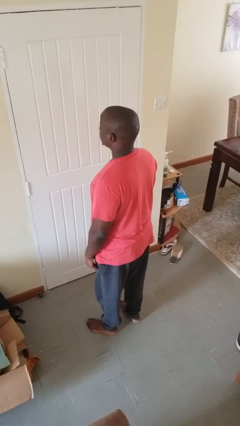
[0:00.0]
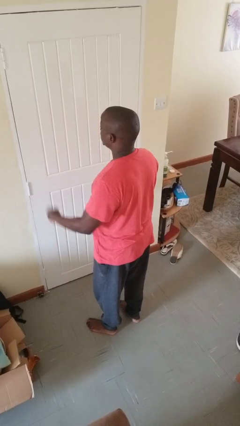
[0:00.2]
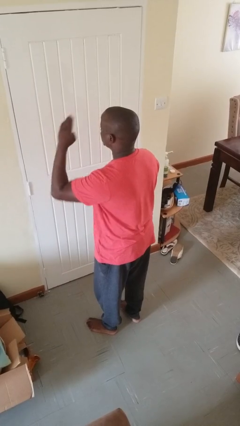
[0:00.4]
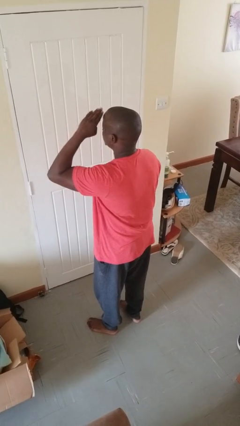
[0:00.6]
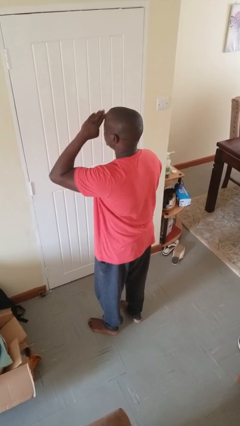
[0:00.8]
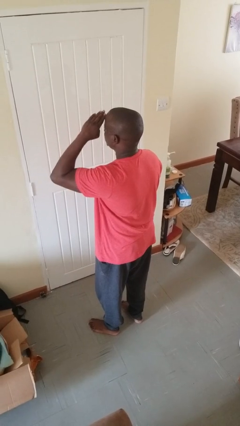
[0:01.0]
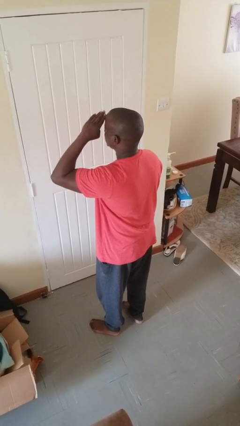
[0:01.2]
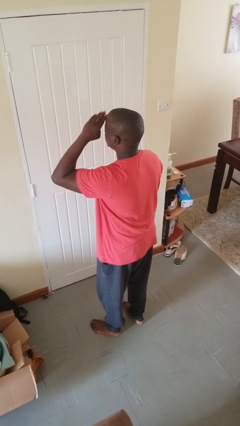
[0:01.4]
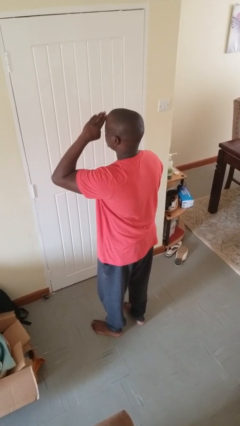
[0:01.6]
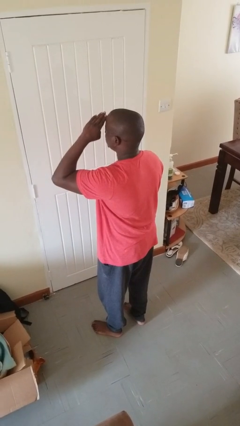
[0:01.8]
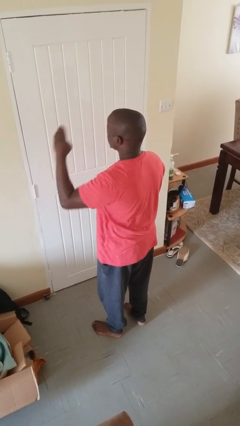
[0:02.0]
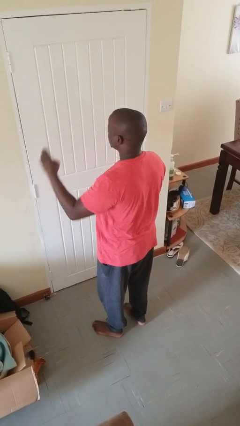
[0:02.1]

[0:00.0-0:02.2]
person salutes

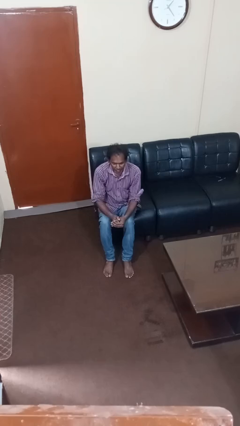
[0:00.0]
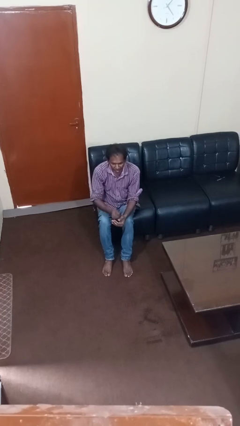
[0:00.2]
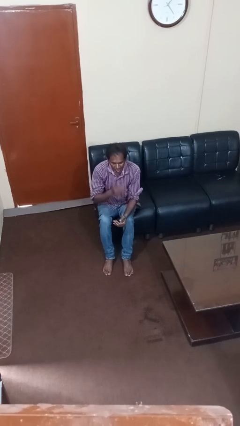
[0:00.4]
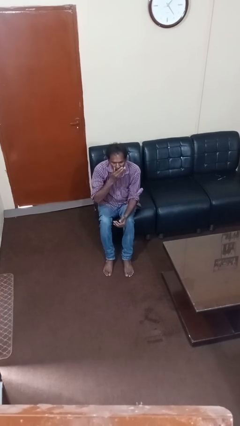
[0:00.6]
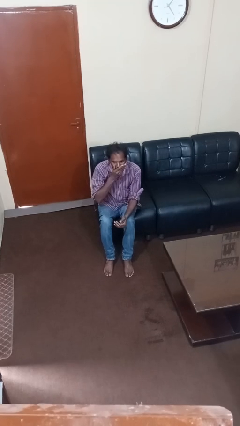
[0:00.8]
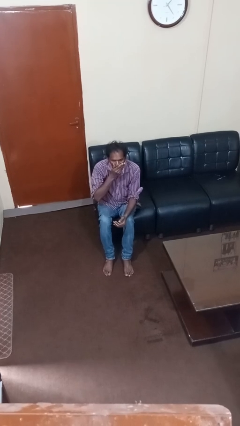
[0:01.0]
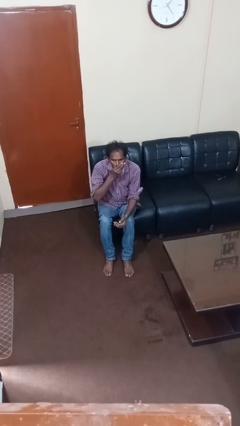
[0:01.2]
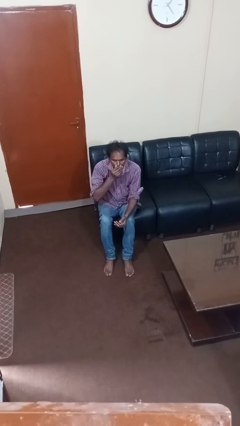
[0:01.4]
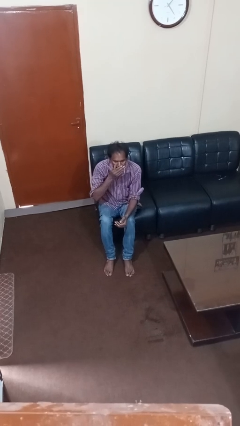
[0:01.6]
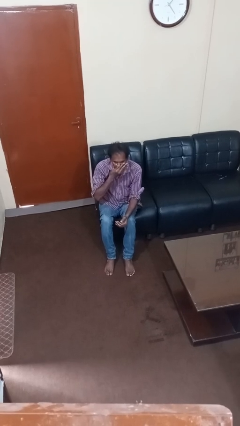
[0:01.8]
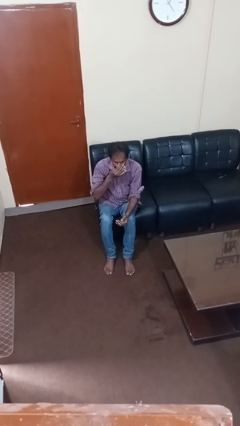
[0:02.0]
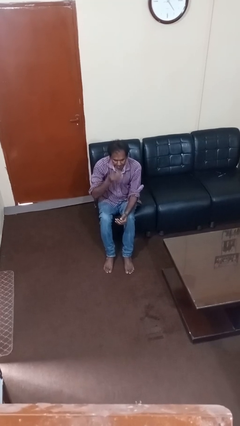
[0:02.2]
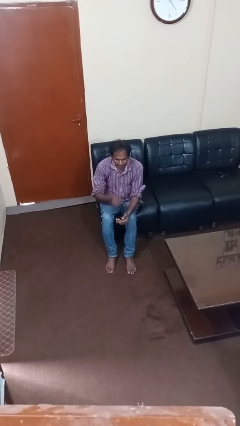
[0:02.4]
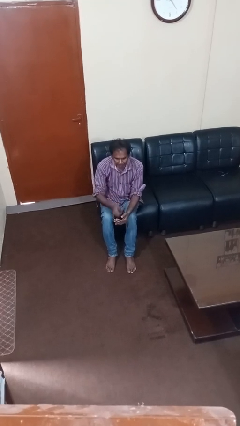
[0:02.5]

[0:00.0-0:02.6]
person yawns

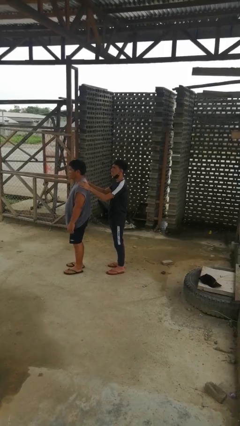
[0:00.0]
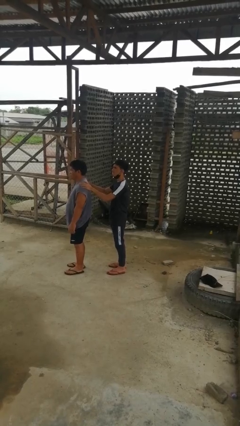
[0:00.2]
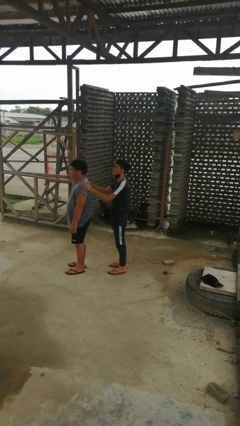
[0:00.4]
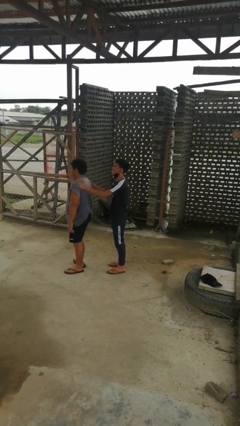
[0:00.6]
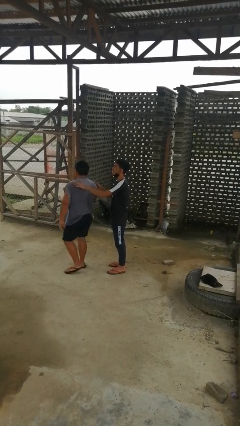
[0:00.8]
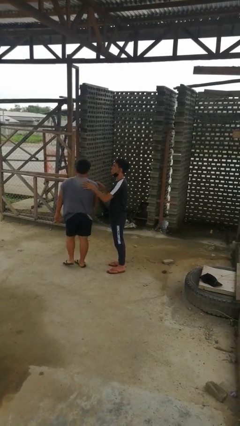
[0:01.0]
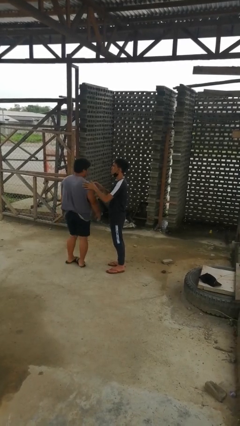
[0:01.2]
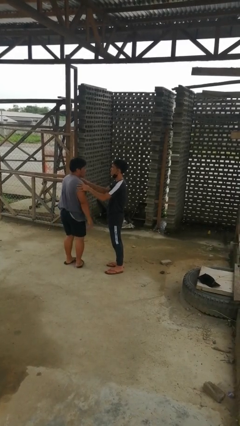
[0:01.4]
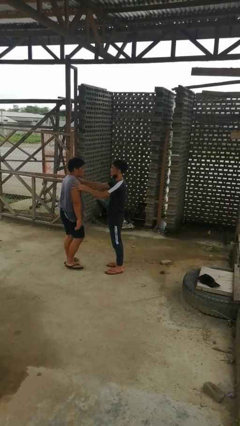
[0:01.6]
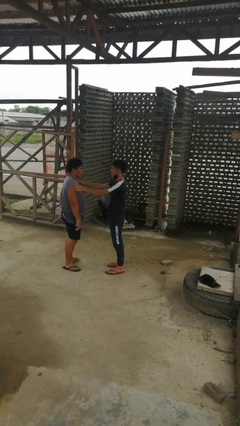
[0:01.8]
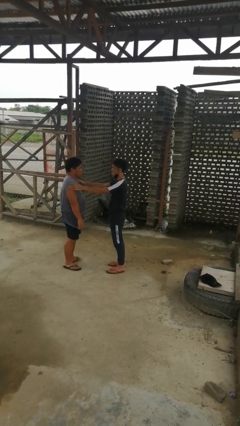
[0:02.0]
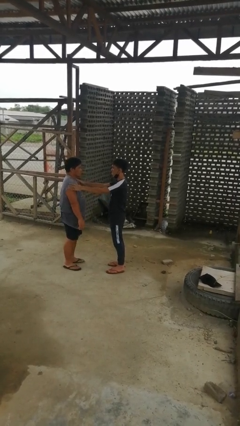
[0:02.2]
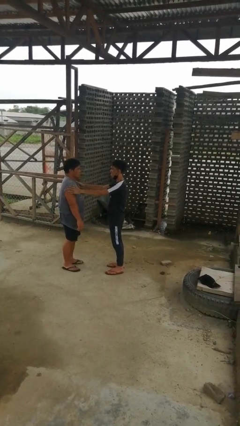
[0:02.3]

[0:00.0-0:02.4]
person spins person around

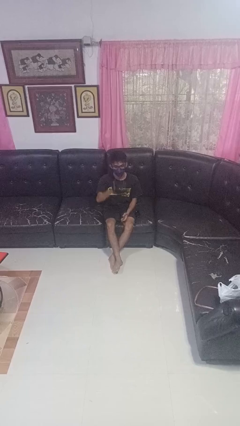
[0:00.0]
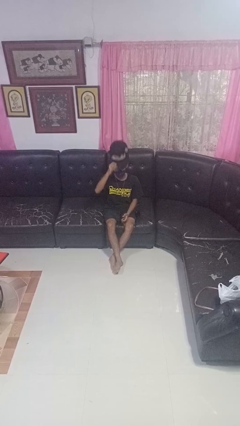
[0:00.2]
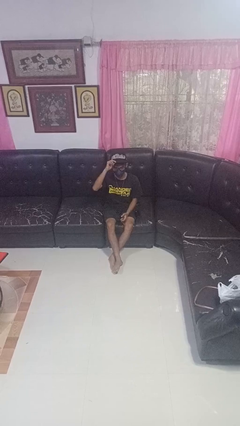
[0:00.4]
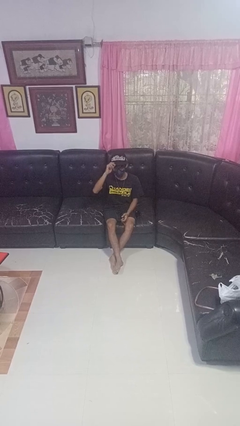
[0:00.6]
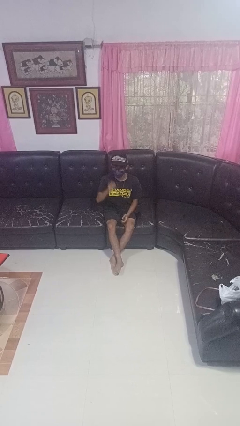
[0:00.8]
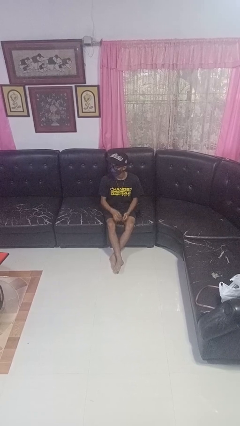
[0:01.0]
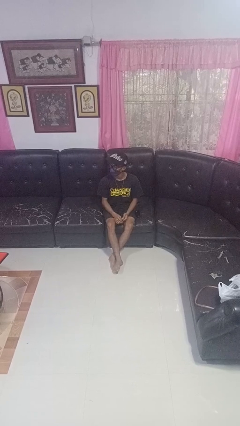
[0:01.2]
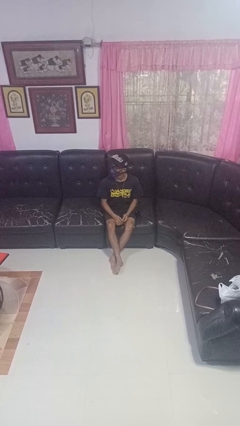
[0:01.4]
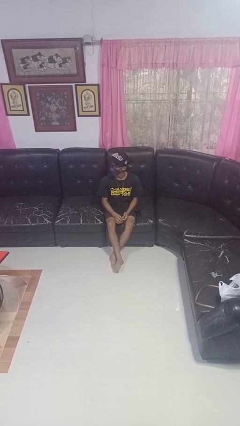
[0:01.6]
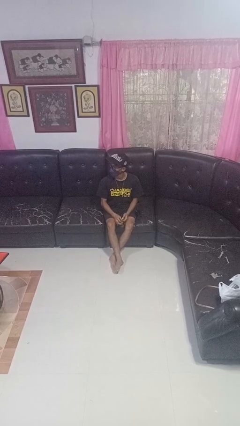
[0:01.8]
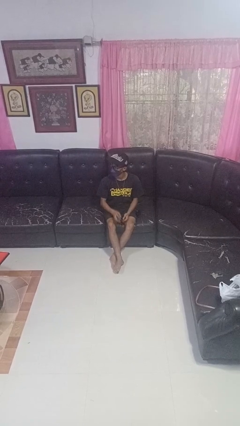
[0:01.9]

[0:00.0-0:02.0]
person puts on hat

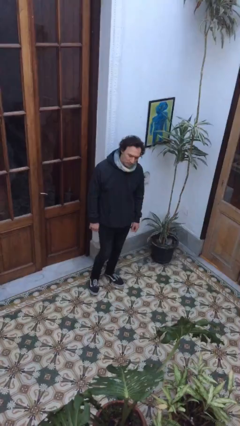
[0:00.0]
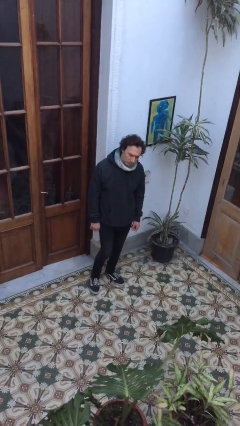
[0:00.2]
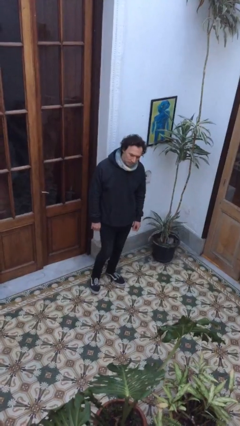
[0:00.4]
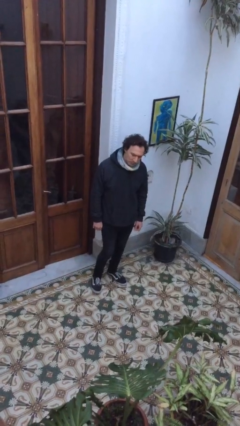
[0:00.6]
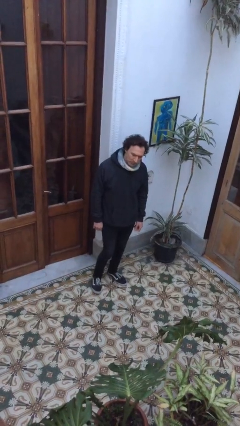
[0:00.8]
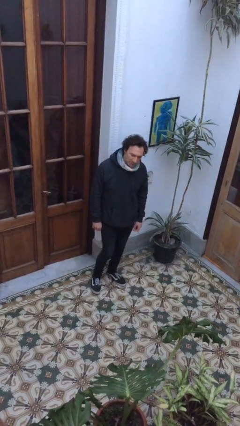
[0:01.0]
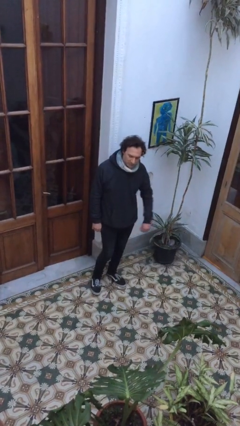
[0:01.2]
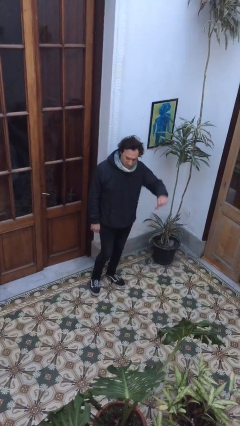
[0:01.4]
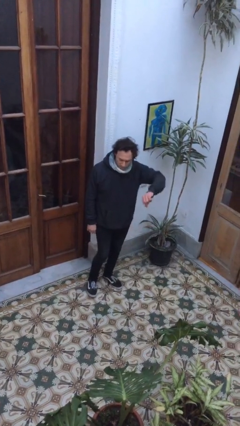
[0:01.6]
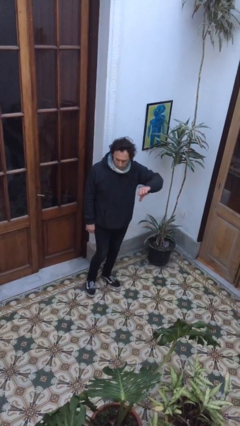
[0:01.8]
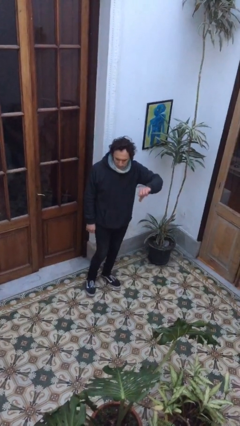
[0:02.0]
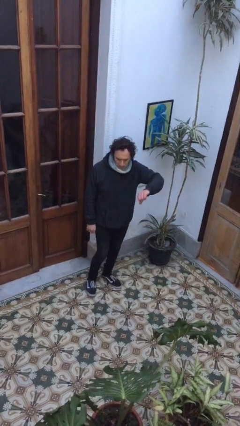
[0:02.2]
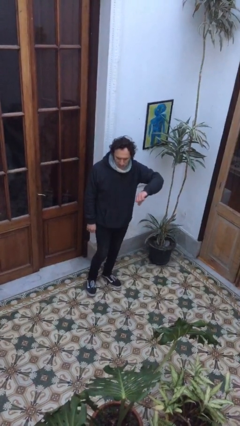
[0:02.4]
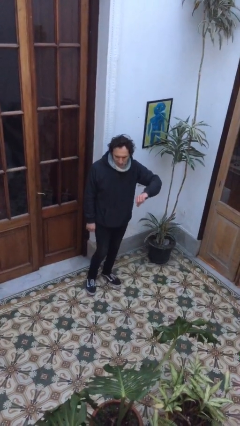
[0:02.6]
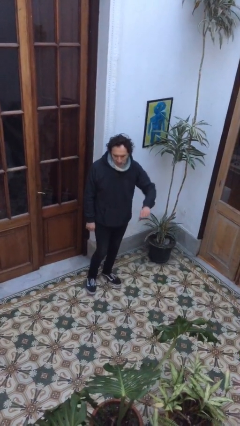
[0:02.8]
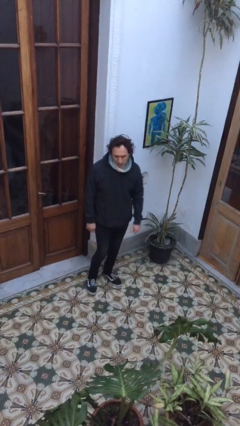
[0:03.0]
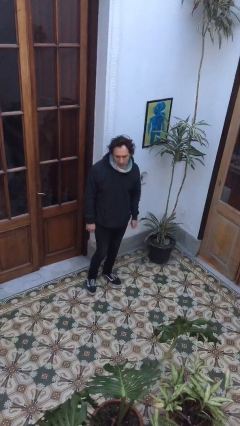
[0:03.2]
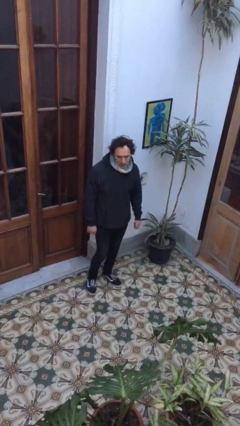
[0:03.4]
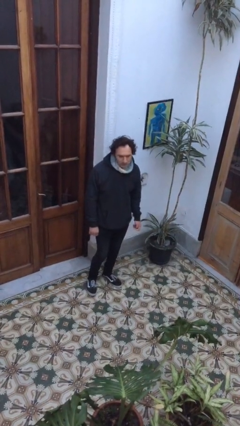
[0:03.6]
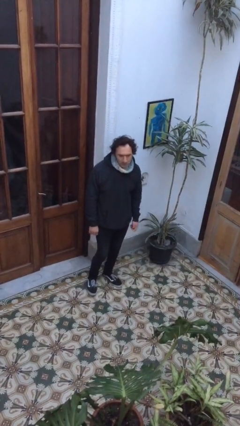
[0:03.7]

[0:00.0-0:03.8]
person gestures thumbs down

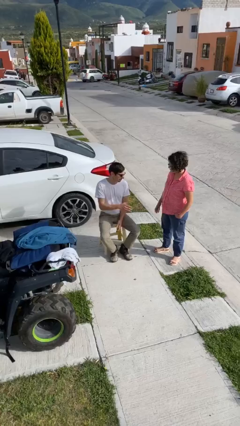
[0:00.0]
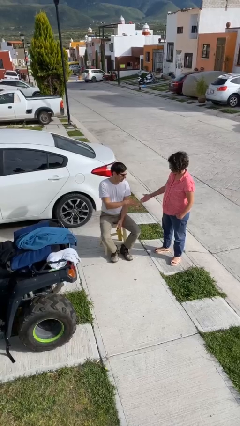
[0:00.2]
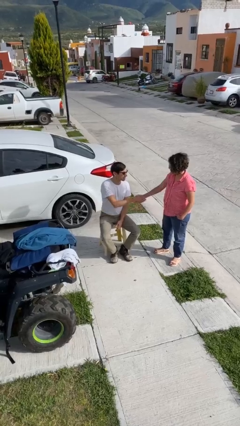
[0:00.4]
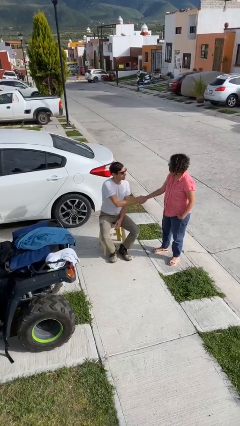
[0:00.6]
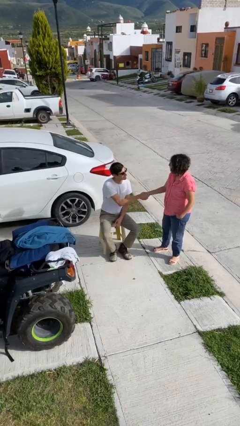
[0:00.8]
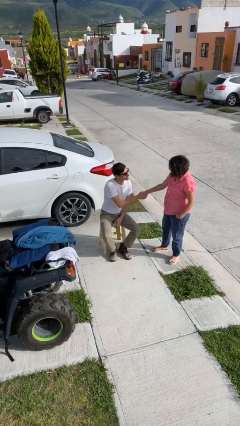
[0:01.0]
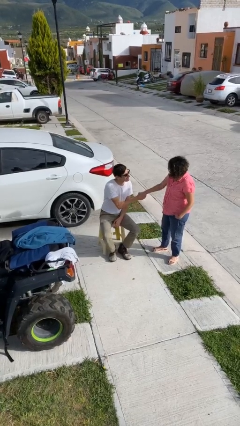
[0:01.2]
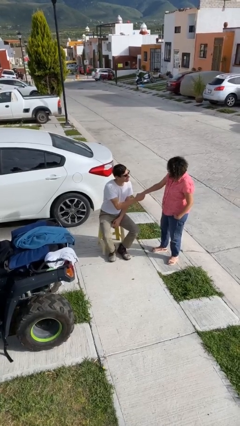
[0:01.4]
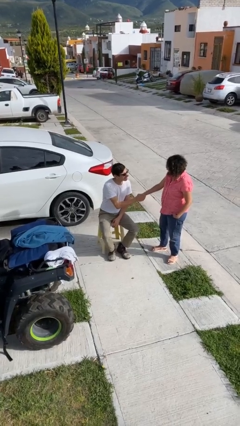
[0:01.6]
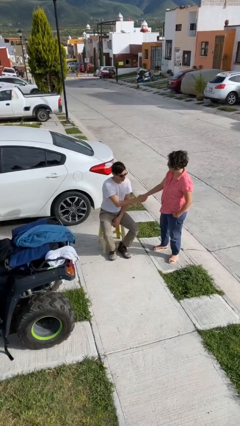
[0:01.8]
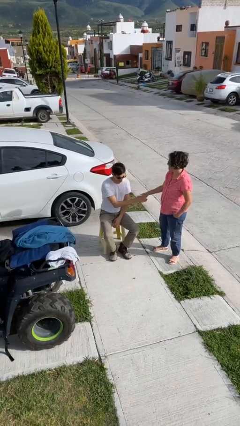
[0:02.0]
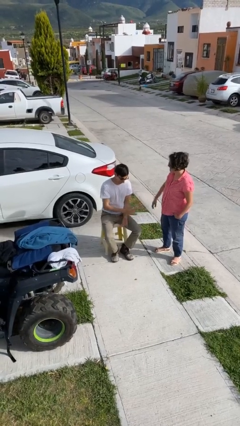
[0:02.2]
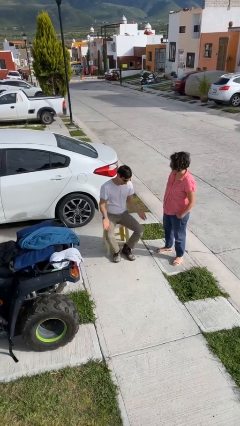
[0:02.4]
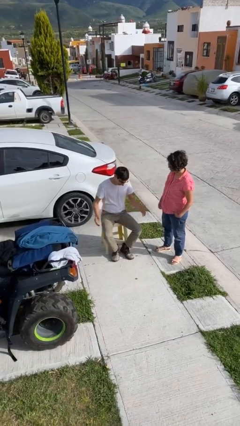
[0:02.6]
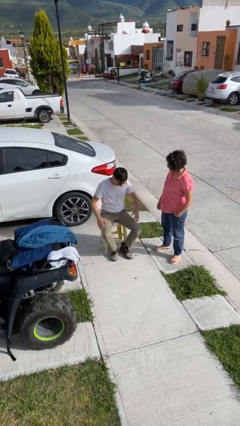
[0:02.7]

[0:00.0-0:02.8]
person shakes hand

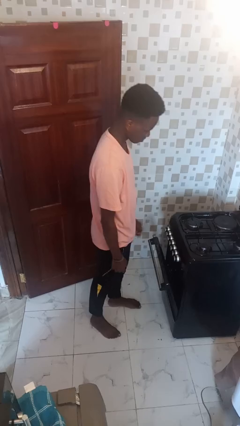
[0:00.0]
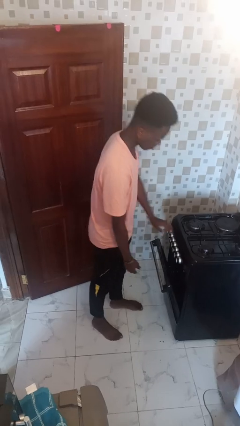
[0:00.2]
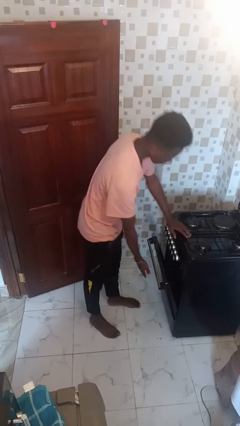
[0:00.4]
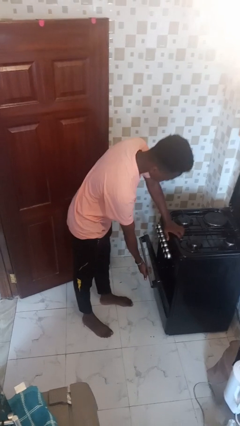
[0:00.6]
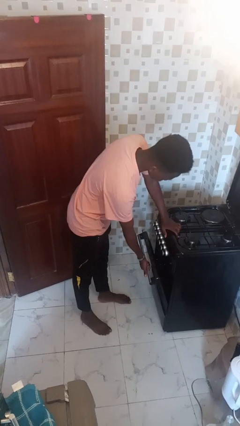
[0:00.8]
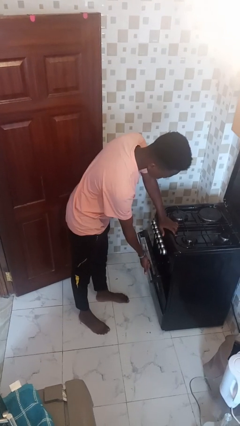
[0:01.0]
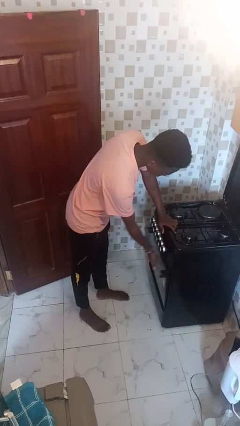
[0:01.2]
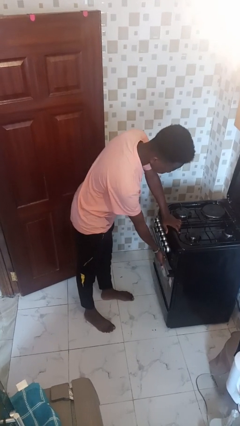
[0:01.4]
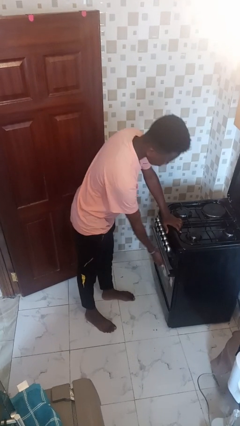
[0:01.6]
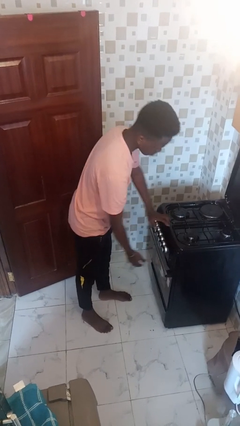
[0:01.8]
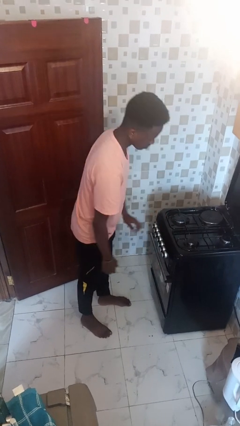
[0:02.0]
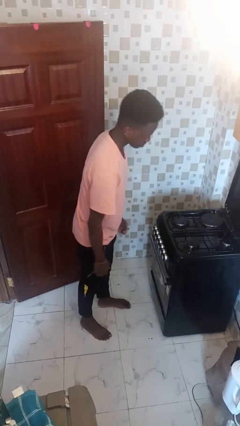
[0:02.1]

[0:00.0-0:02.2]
person closes oven door
